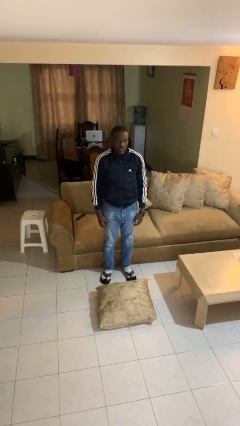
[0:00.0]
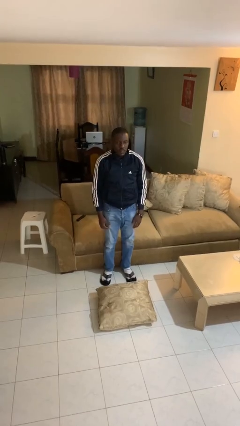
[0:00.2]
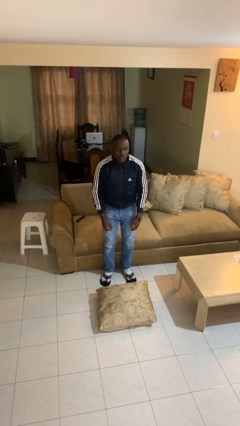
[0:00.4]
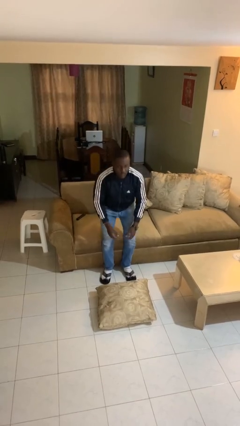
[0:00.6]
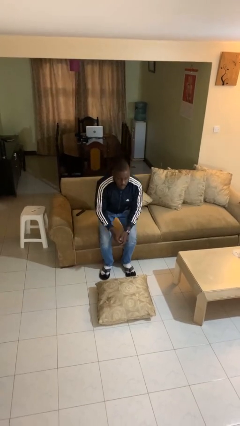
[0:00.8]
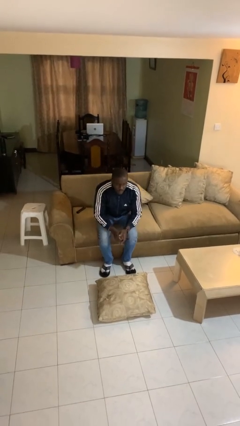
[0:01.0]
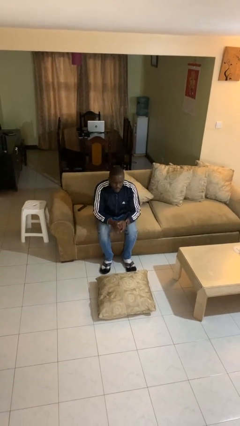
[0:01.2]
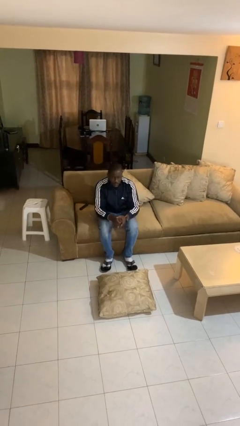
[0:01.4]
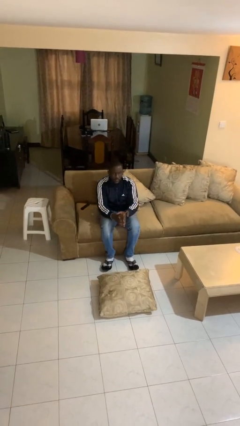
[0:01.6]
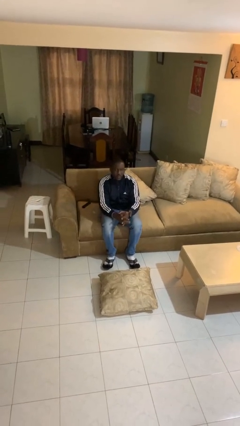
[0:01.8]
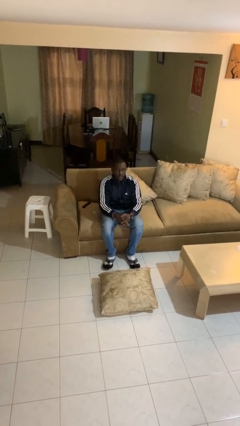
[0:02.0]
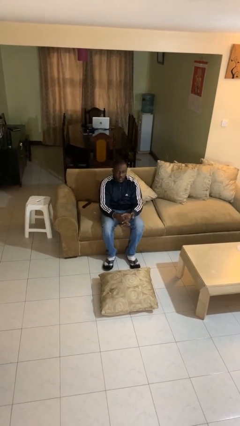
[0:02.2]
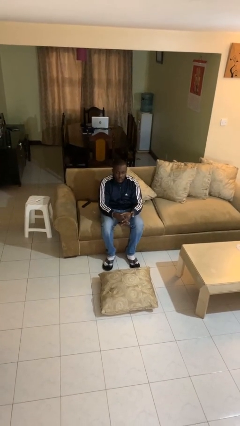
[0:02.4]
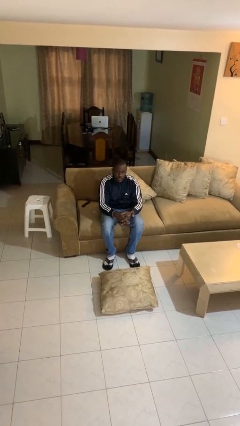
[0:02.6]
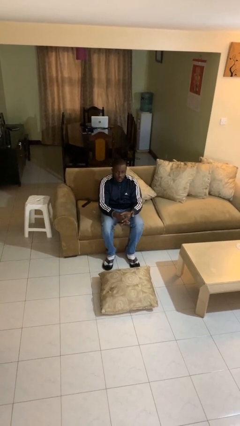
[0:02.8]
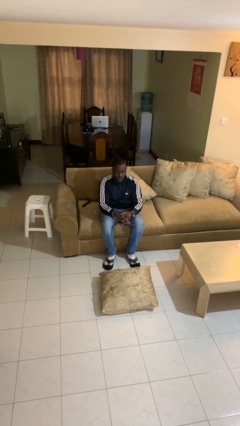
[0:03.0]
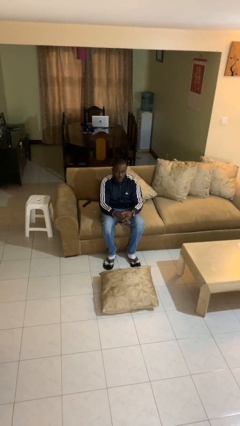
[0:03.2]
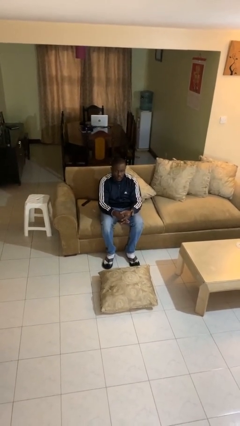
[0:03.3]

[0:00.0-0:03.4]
person sits down

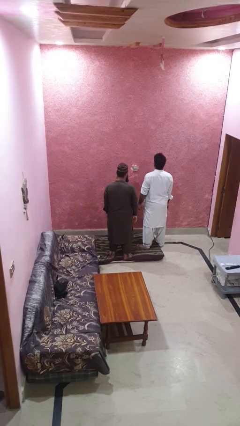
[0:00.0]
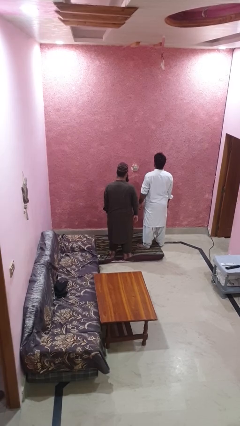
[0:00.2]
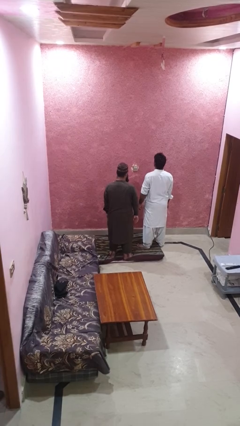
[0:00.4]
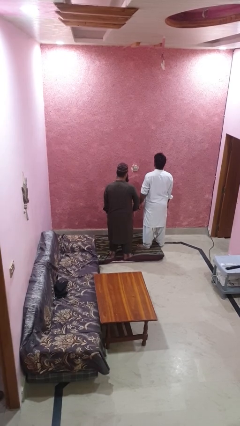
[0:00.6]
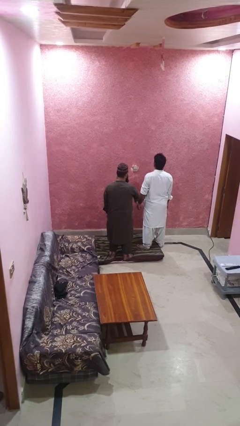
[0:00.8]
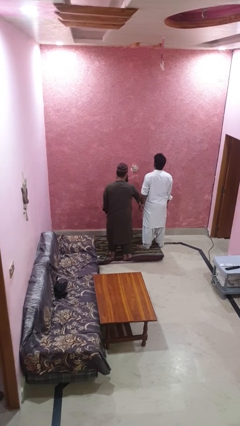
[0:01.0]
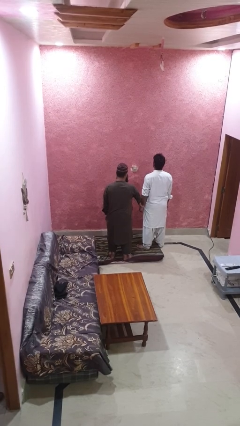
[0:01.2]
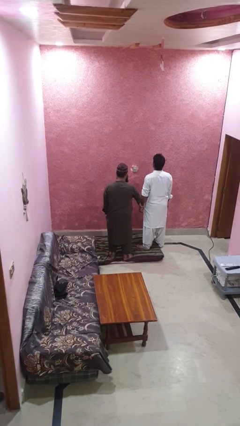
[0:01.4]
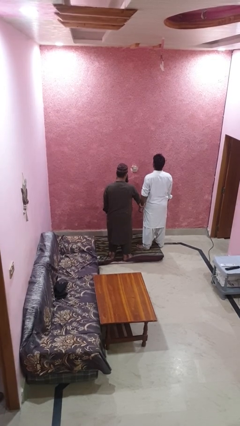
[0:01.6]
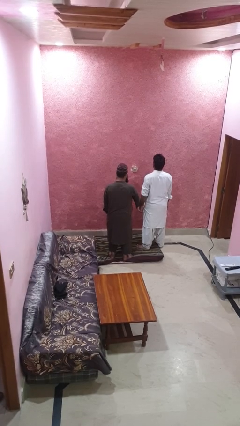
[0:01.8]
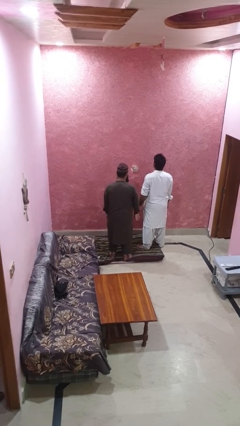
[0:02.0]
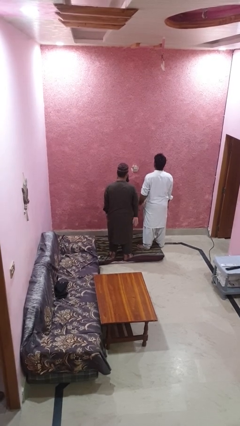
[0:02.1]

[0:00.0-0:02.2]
person grabs person by forearm

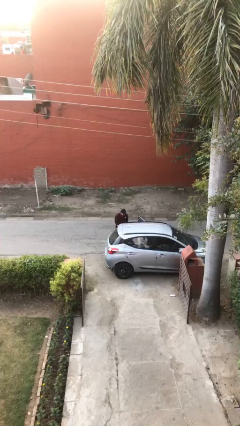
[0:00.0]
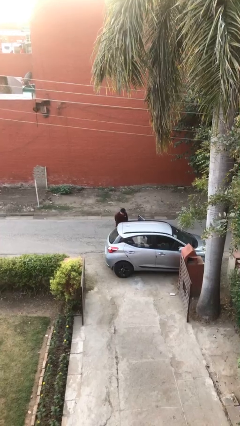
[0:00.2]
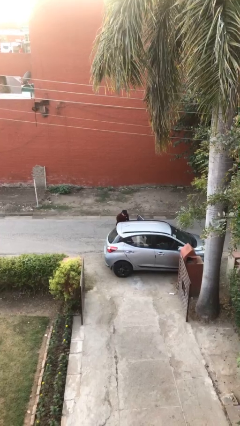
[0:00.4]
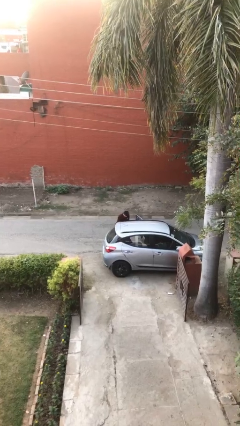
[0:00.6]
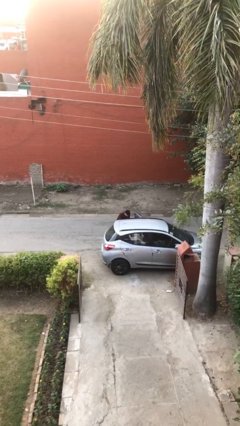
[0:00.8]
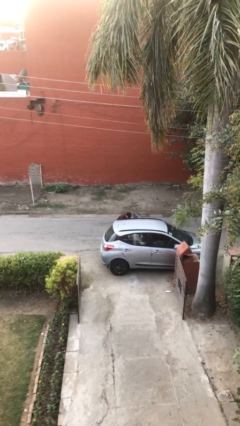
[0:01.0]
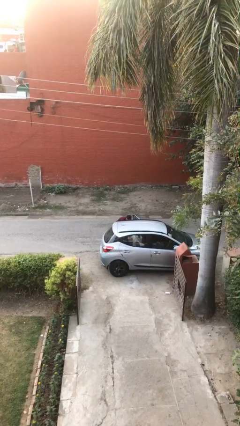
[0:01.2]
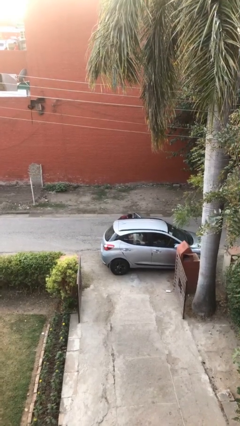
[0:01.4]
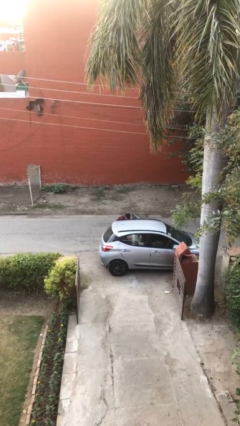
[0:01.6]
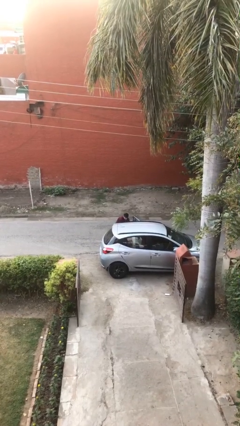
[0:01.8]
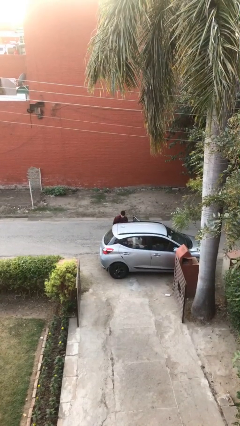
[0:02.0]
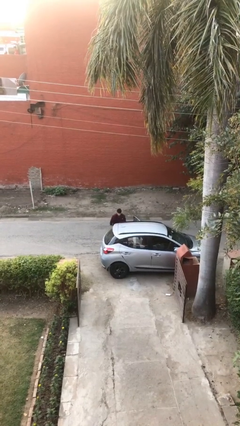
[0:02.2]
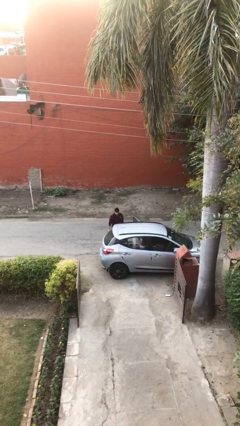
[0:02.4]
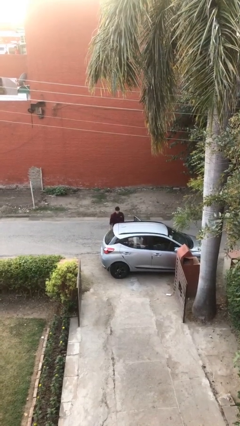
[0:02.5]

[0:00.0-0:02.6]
person loads car

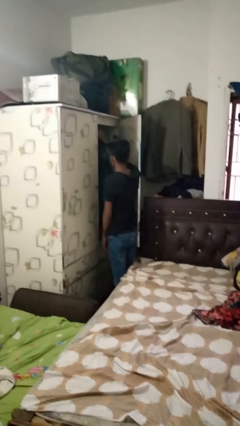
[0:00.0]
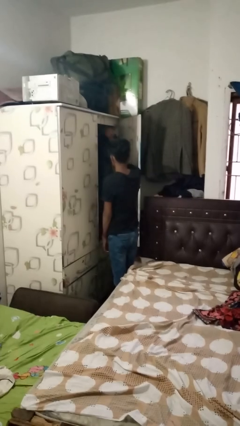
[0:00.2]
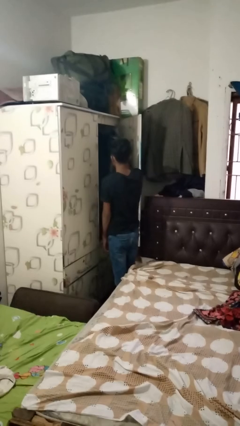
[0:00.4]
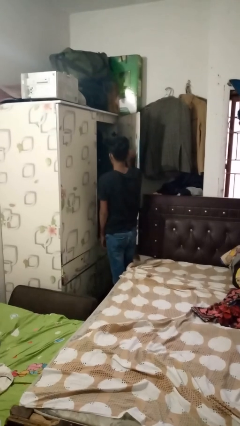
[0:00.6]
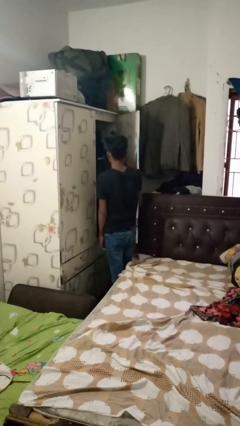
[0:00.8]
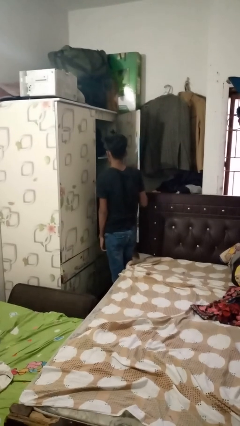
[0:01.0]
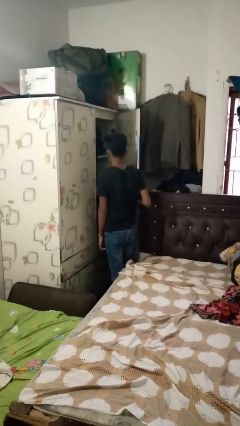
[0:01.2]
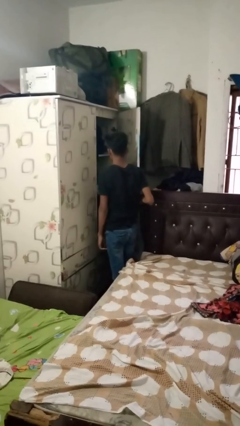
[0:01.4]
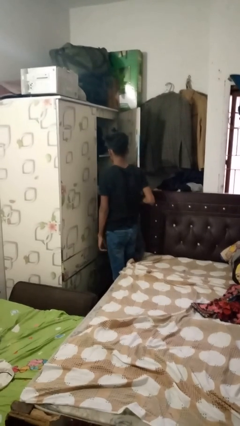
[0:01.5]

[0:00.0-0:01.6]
person takes clothes from closet

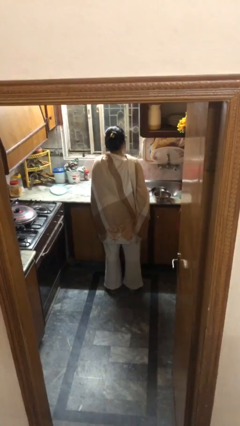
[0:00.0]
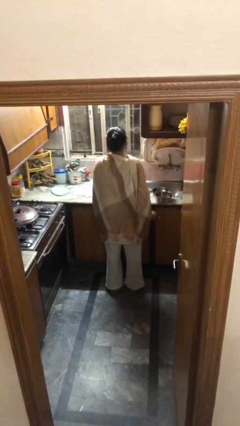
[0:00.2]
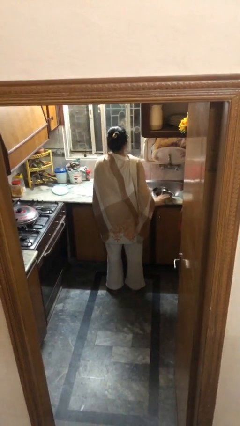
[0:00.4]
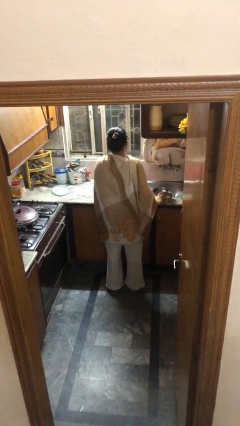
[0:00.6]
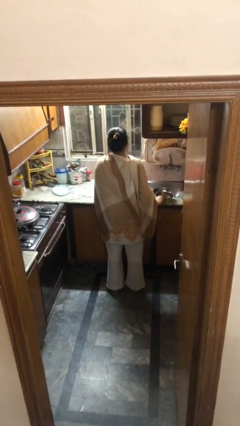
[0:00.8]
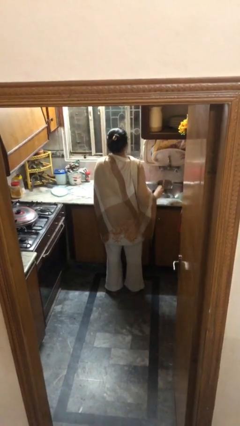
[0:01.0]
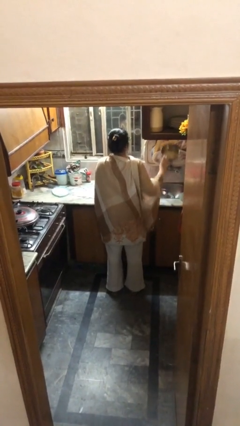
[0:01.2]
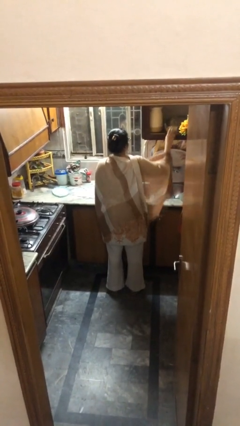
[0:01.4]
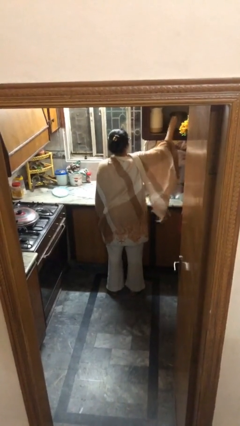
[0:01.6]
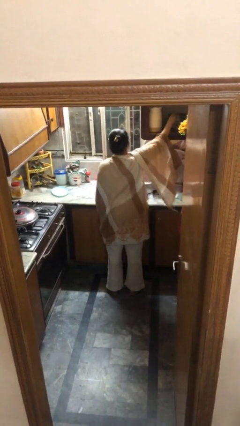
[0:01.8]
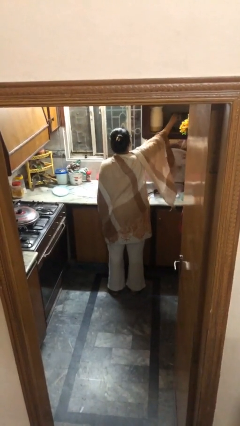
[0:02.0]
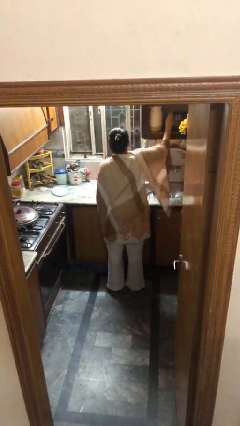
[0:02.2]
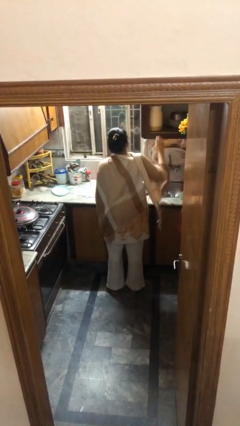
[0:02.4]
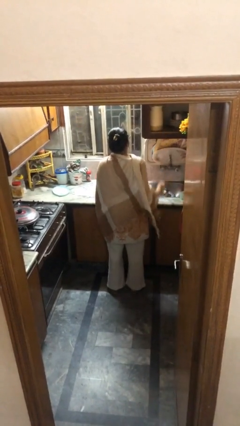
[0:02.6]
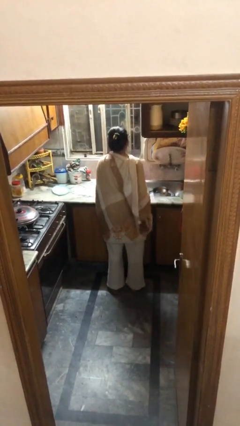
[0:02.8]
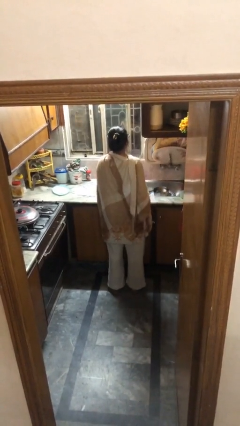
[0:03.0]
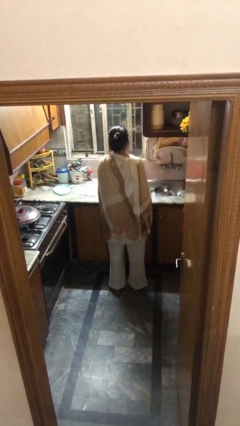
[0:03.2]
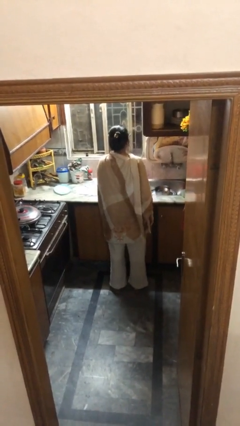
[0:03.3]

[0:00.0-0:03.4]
person puts object in cabinet

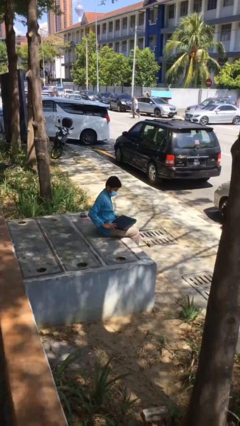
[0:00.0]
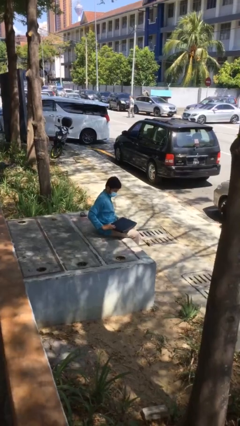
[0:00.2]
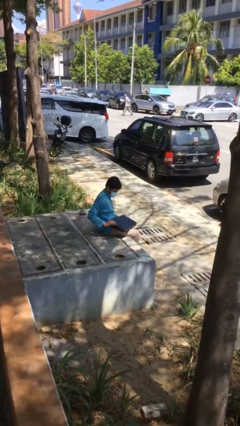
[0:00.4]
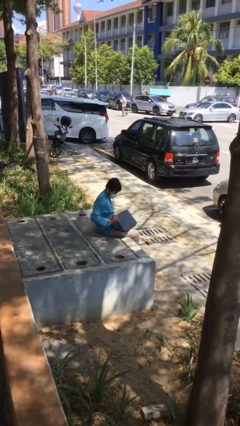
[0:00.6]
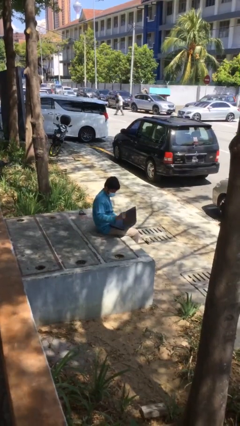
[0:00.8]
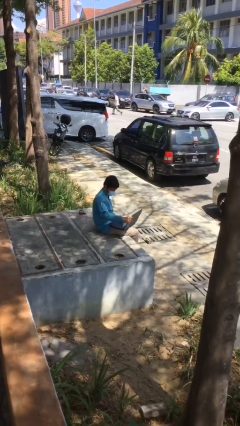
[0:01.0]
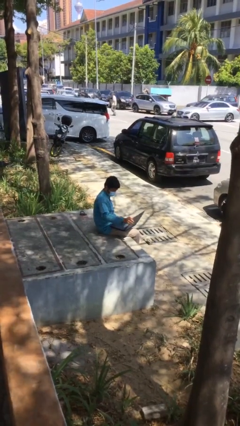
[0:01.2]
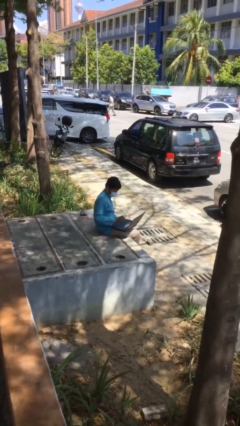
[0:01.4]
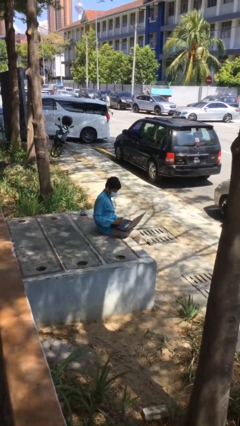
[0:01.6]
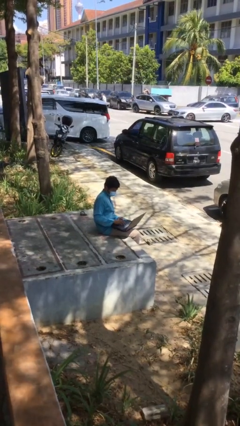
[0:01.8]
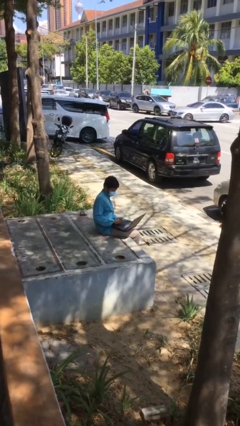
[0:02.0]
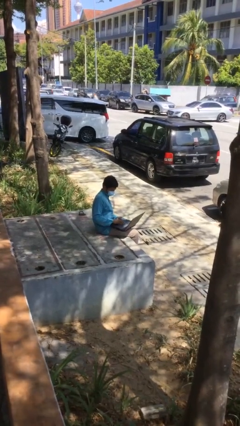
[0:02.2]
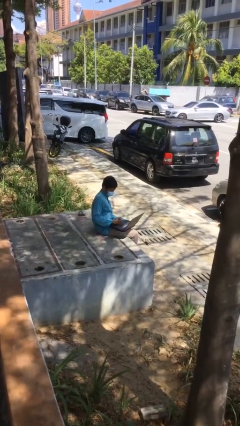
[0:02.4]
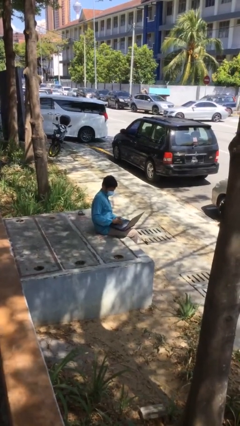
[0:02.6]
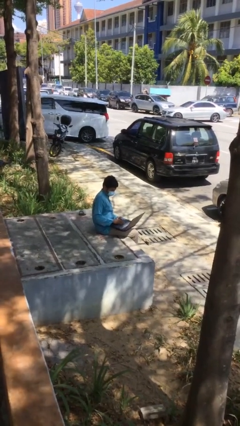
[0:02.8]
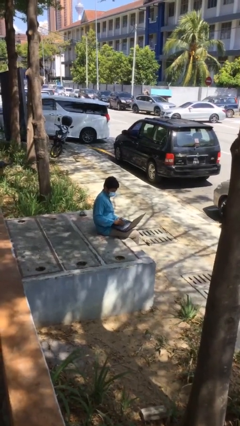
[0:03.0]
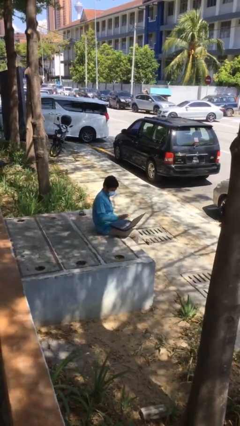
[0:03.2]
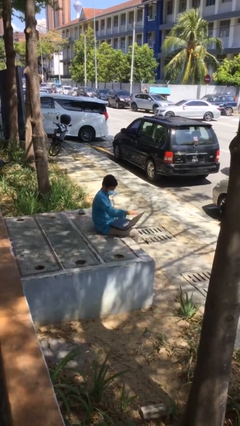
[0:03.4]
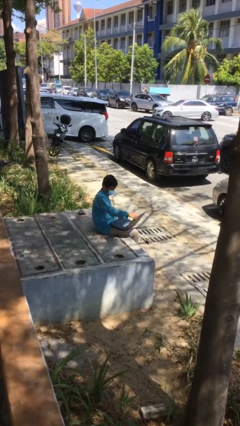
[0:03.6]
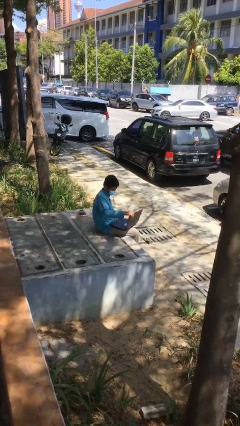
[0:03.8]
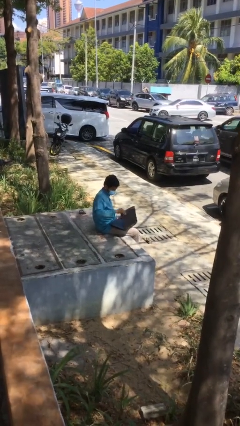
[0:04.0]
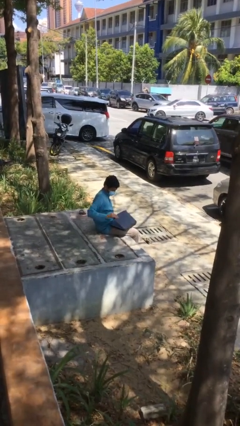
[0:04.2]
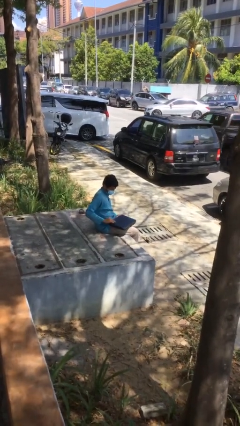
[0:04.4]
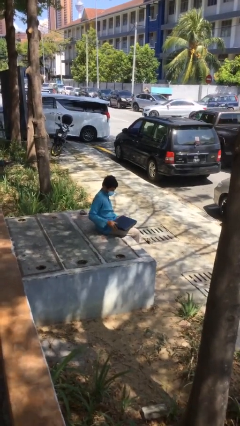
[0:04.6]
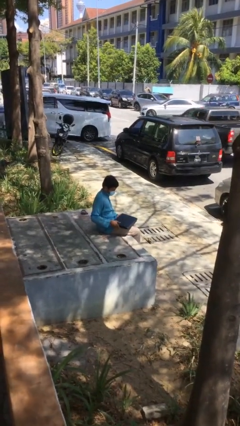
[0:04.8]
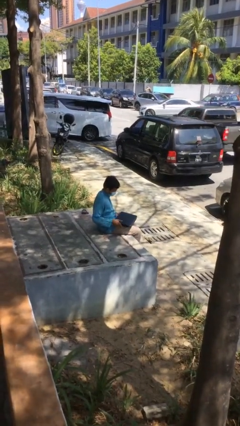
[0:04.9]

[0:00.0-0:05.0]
person interacts with laptop
